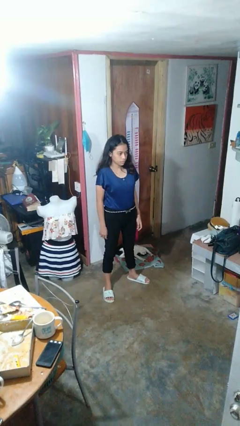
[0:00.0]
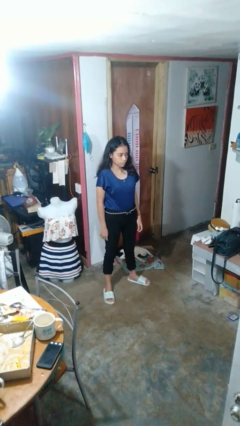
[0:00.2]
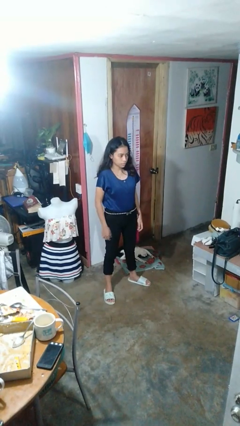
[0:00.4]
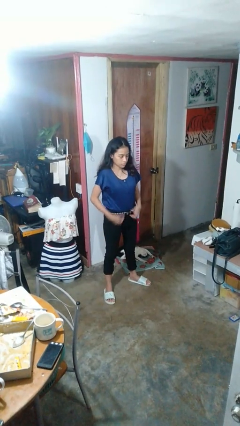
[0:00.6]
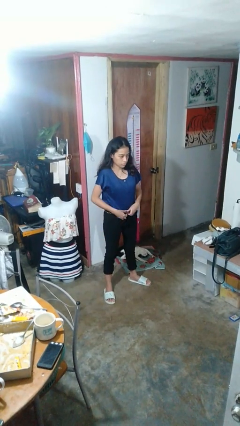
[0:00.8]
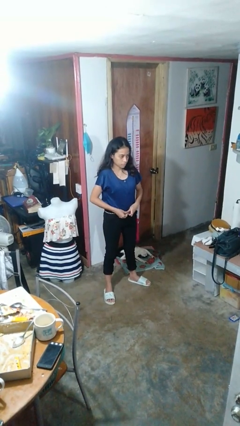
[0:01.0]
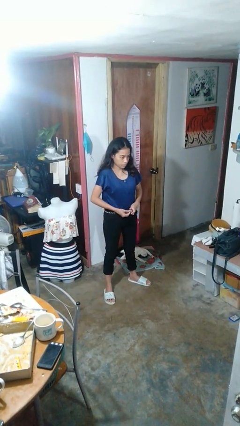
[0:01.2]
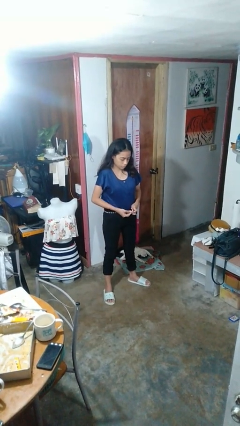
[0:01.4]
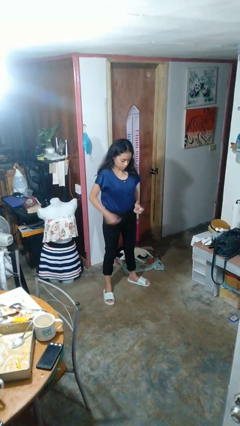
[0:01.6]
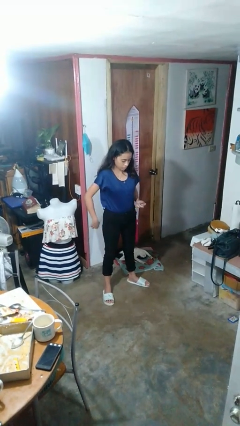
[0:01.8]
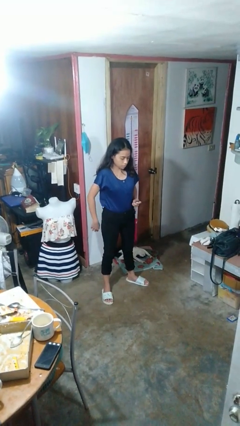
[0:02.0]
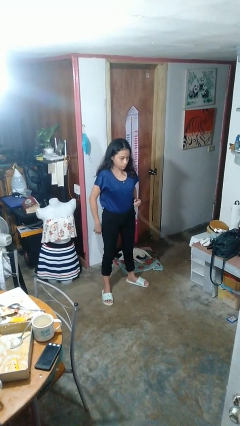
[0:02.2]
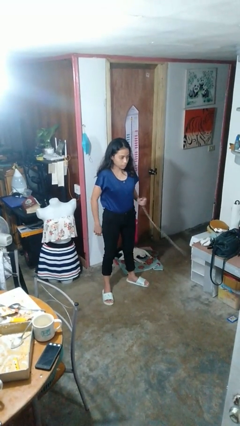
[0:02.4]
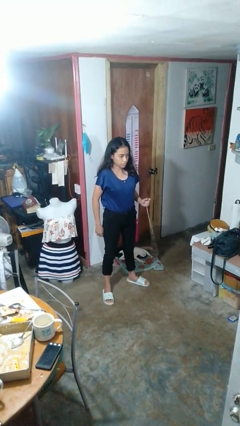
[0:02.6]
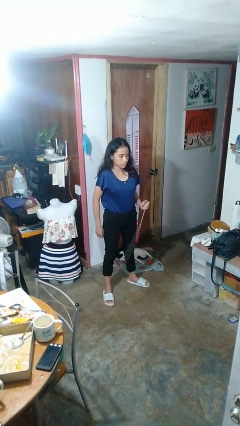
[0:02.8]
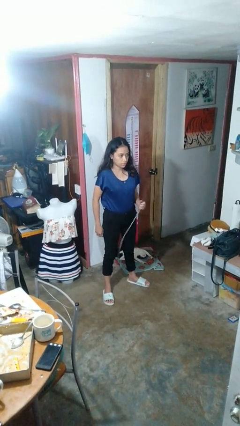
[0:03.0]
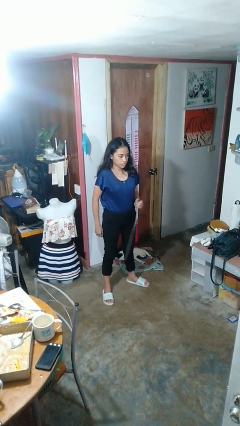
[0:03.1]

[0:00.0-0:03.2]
person takes off belt

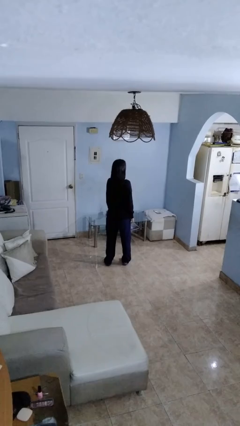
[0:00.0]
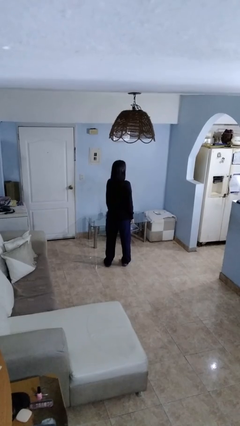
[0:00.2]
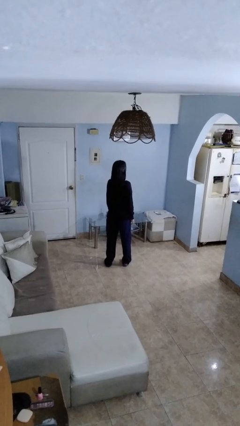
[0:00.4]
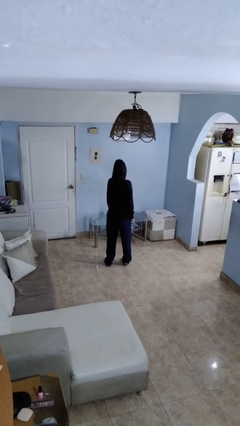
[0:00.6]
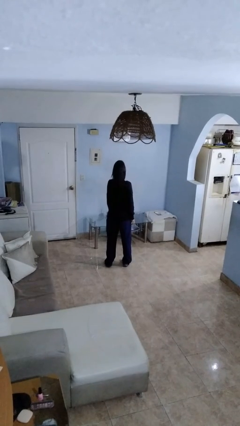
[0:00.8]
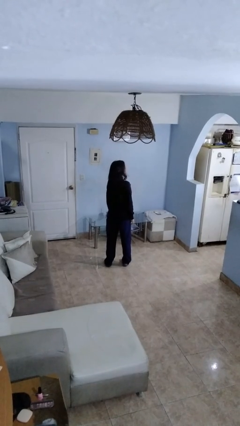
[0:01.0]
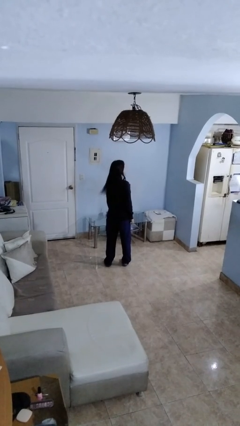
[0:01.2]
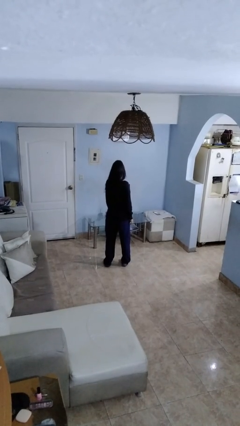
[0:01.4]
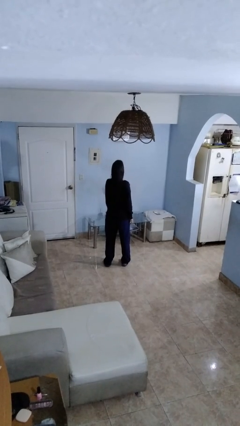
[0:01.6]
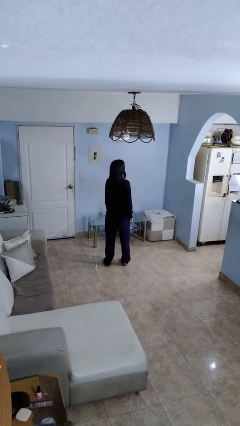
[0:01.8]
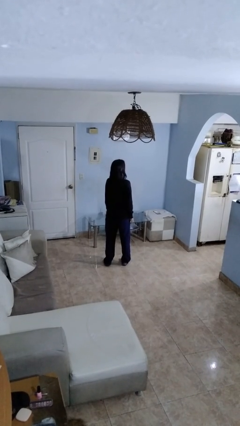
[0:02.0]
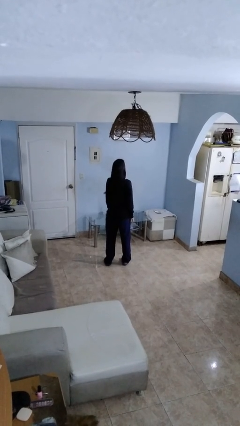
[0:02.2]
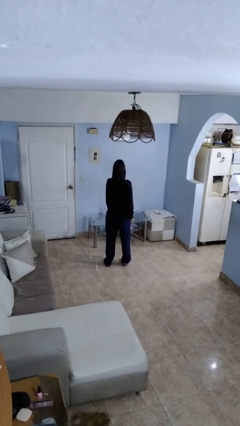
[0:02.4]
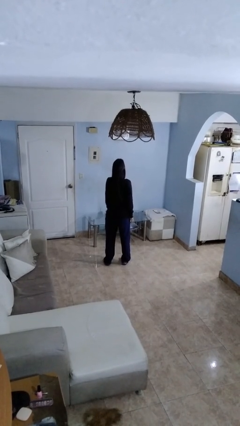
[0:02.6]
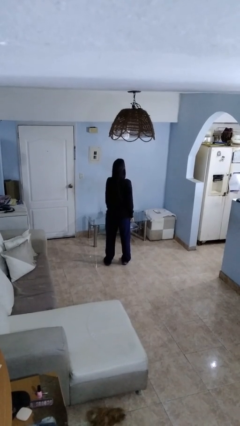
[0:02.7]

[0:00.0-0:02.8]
person shakes head

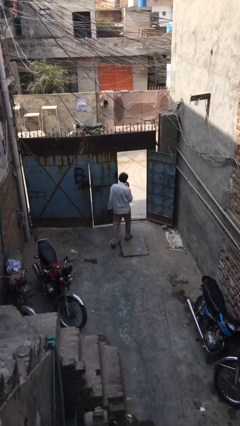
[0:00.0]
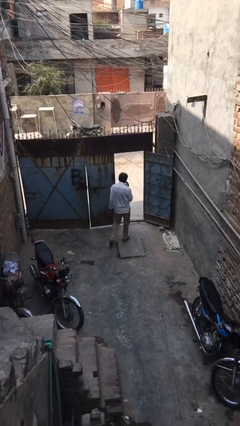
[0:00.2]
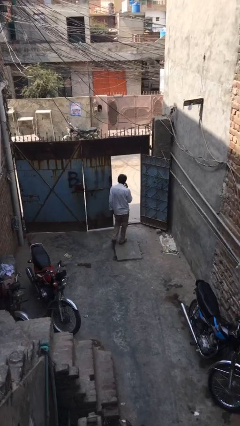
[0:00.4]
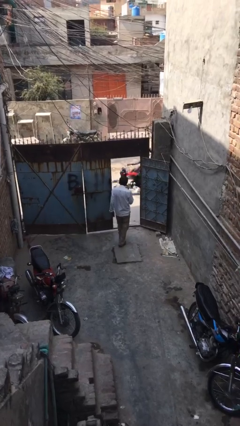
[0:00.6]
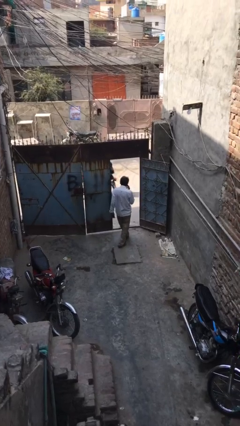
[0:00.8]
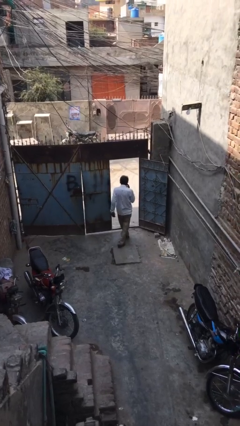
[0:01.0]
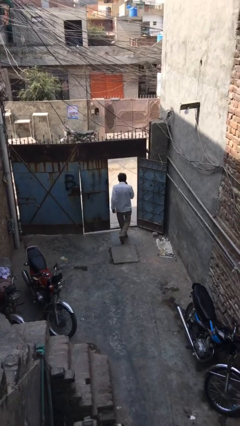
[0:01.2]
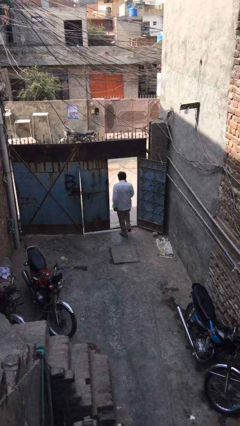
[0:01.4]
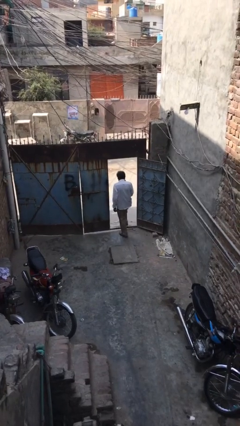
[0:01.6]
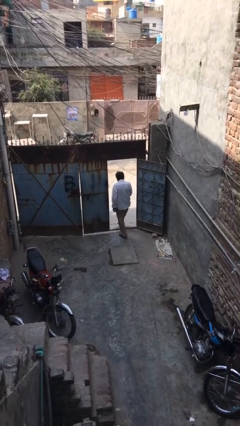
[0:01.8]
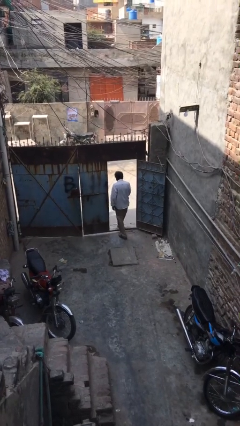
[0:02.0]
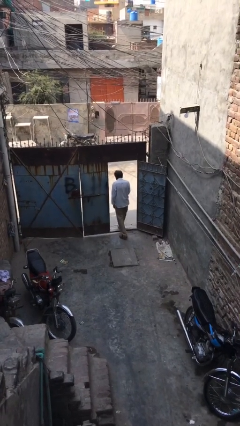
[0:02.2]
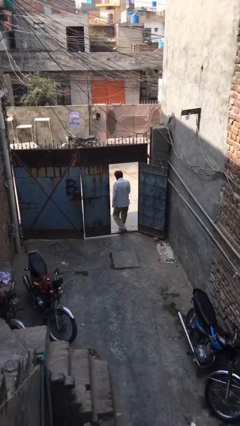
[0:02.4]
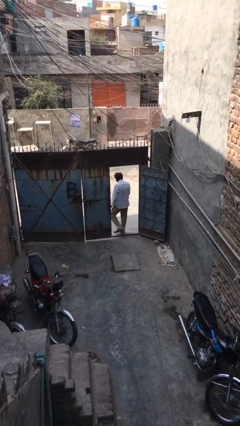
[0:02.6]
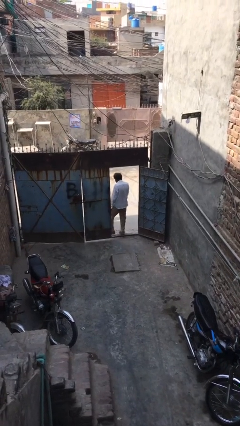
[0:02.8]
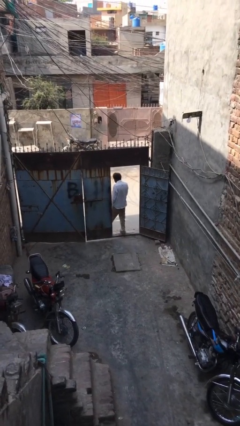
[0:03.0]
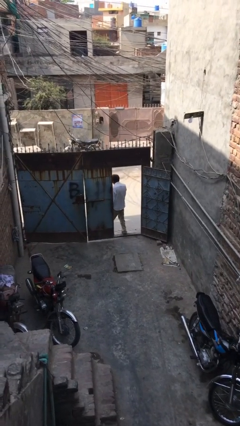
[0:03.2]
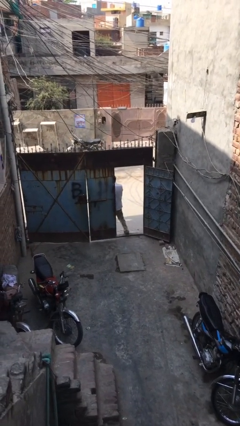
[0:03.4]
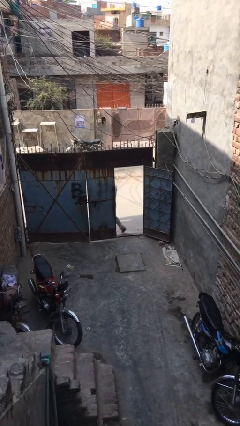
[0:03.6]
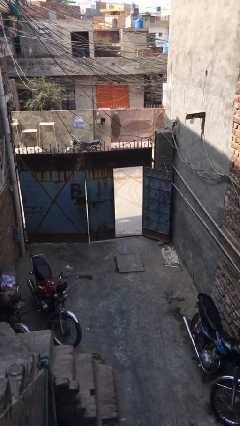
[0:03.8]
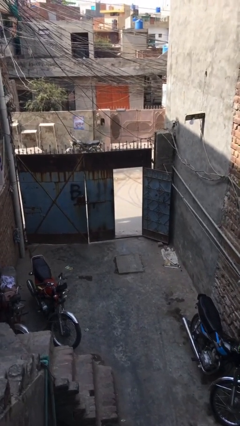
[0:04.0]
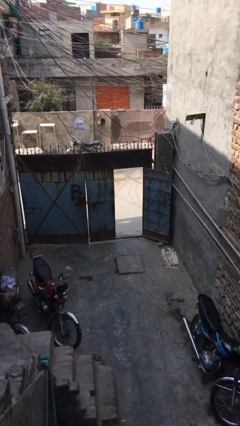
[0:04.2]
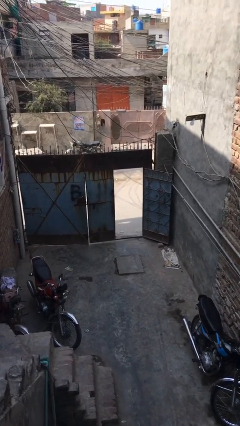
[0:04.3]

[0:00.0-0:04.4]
person exits scene through structure

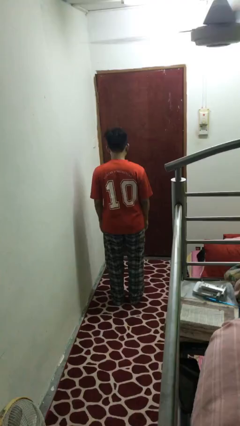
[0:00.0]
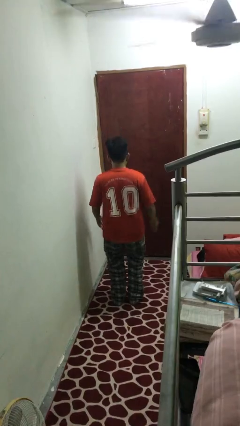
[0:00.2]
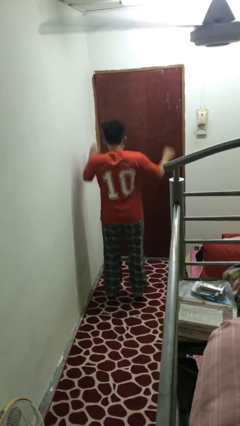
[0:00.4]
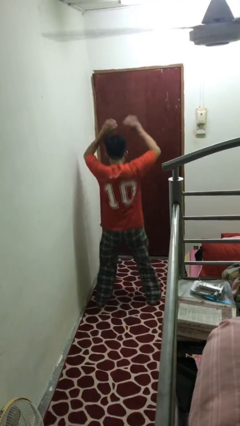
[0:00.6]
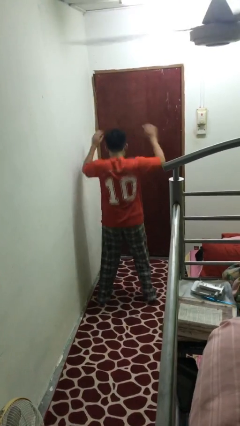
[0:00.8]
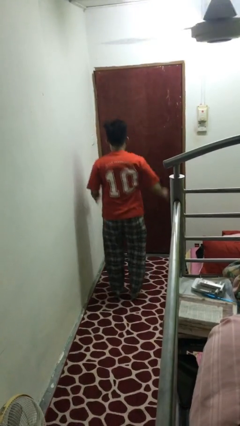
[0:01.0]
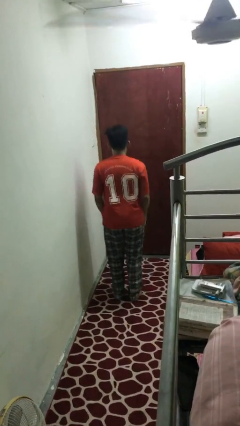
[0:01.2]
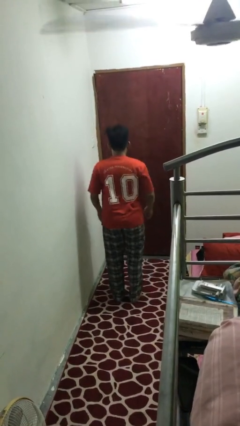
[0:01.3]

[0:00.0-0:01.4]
person exercises with jumping jacks

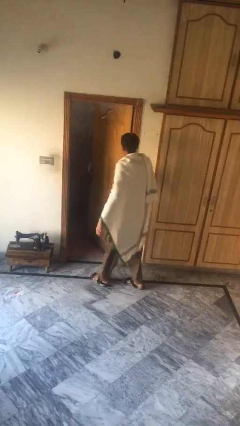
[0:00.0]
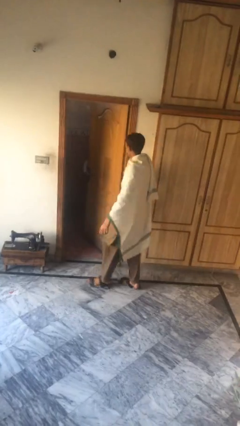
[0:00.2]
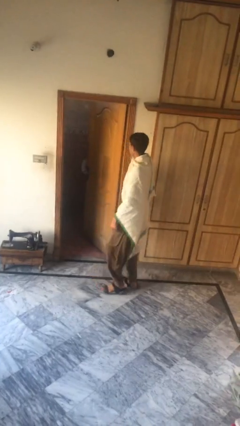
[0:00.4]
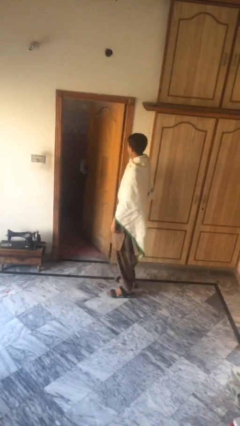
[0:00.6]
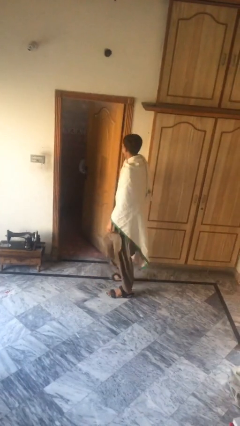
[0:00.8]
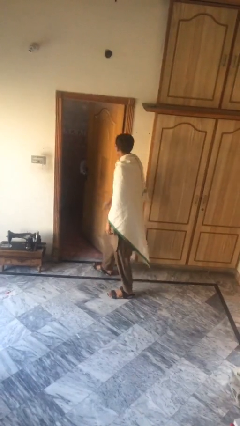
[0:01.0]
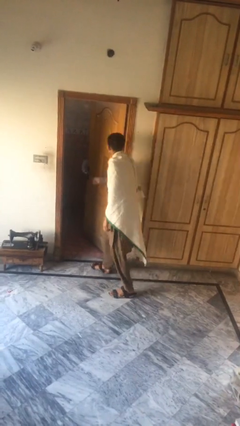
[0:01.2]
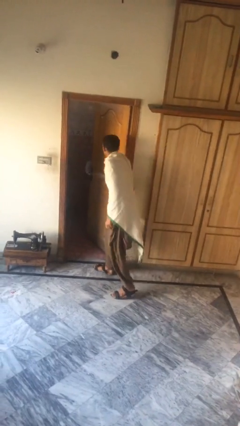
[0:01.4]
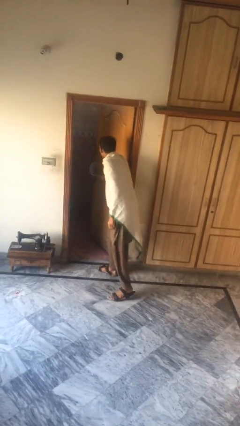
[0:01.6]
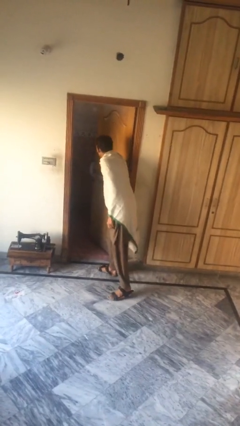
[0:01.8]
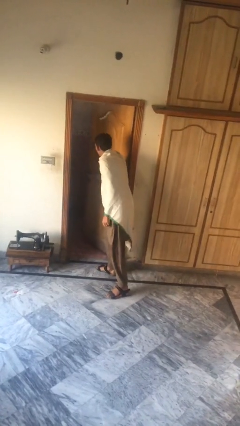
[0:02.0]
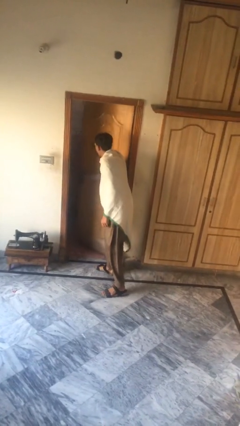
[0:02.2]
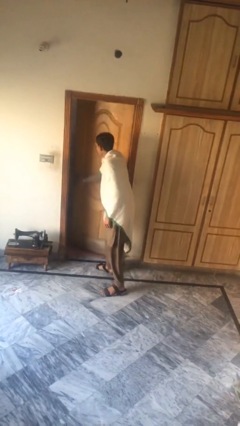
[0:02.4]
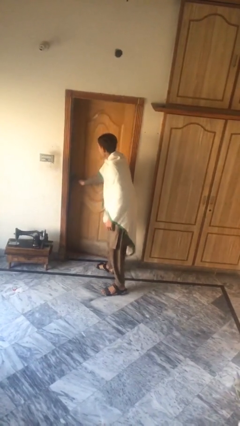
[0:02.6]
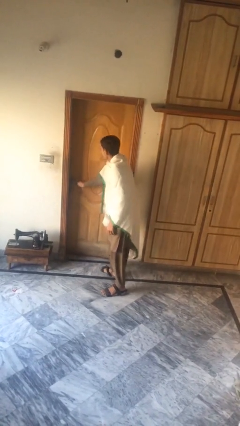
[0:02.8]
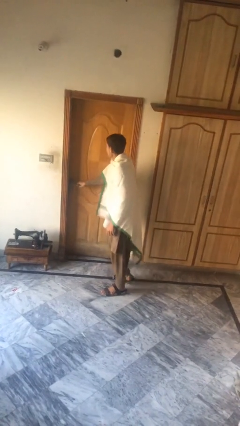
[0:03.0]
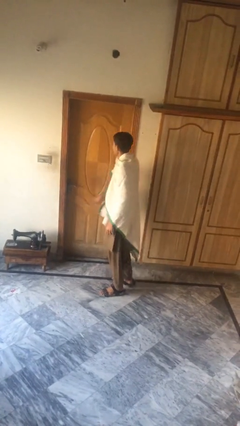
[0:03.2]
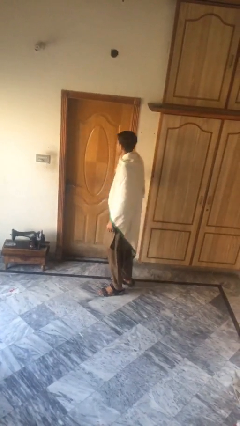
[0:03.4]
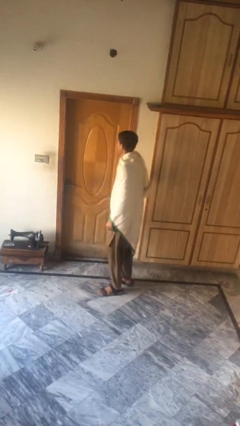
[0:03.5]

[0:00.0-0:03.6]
person closes facility door

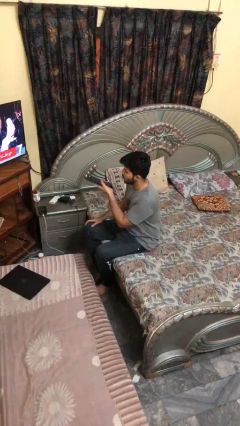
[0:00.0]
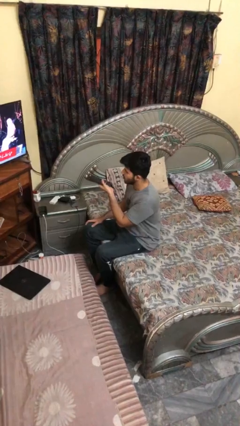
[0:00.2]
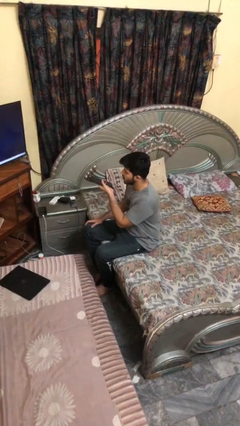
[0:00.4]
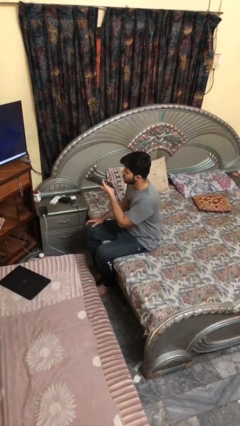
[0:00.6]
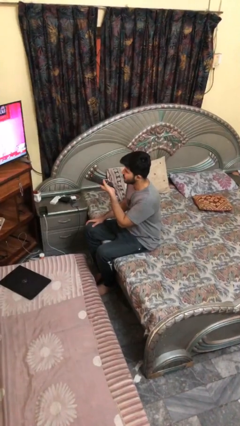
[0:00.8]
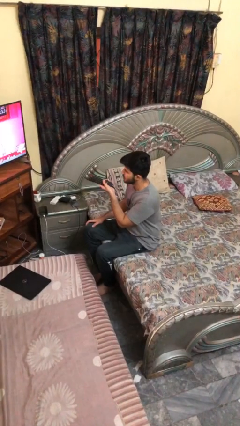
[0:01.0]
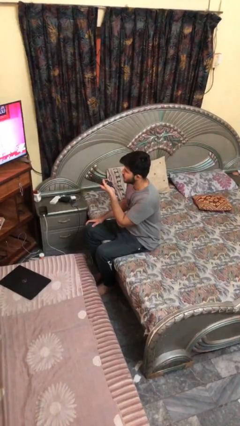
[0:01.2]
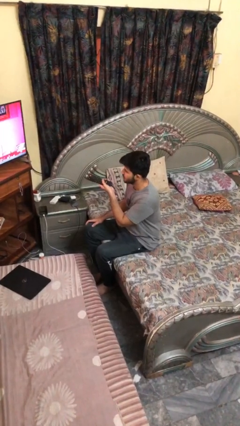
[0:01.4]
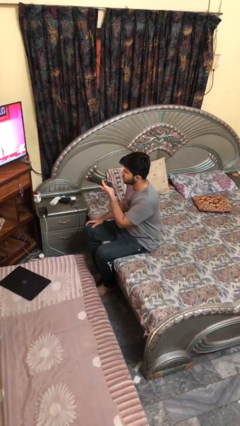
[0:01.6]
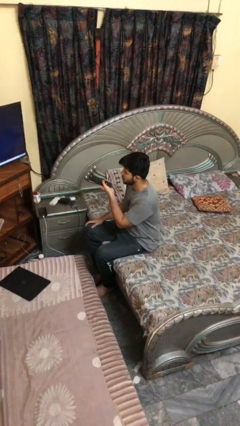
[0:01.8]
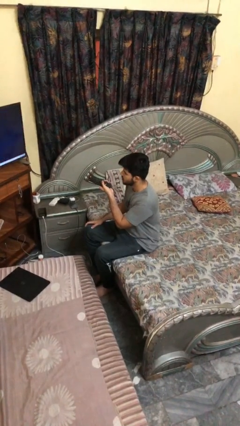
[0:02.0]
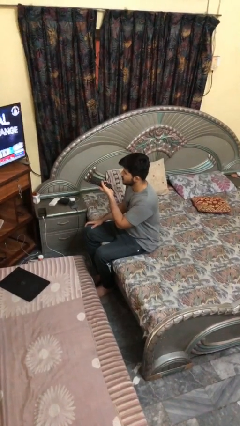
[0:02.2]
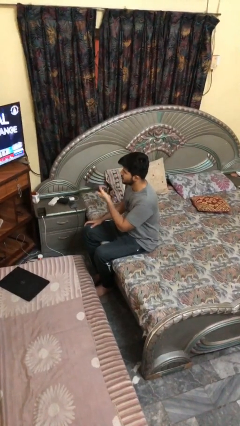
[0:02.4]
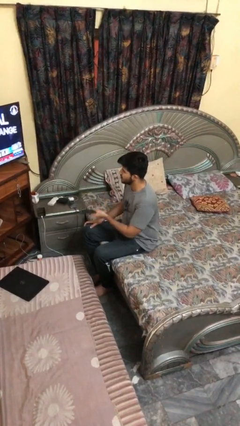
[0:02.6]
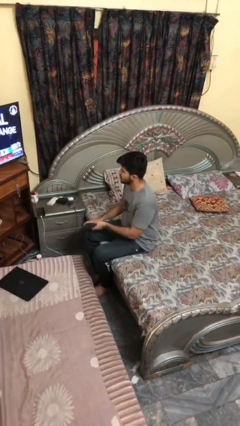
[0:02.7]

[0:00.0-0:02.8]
person uses television remote
